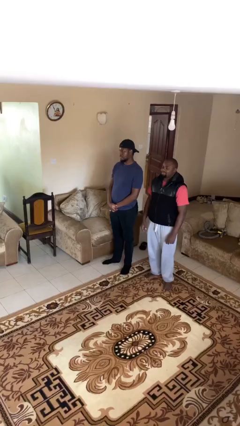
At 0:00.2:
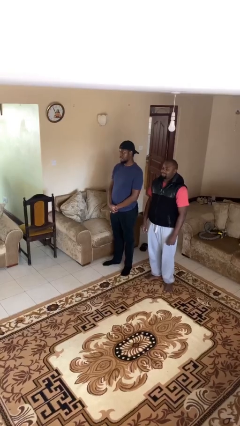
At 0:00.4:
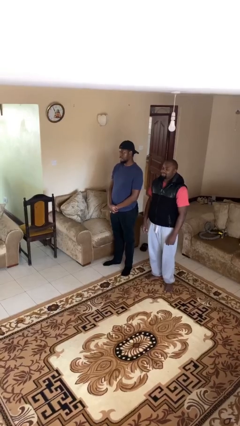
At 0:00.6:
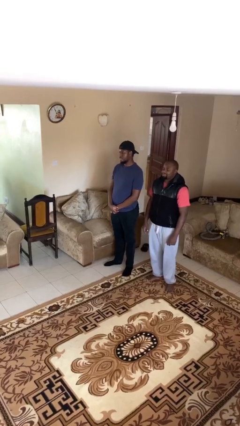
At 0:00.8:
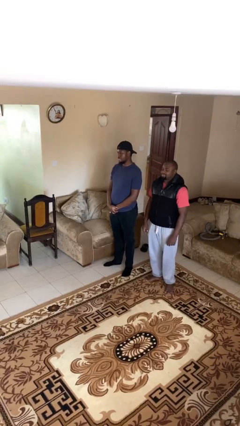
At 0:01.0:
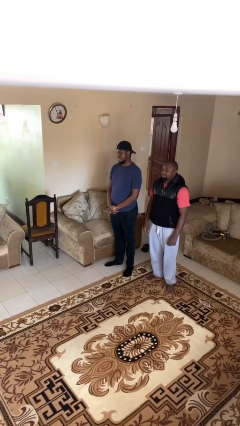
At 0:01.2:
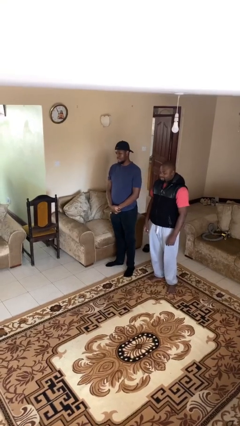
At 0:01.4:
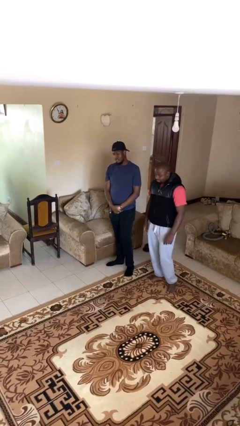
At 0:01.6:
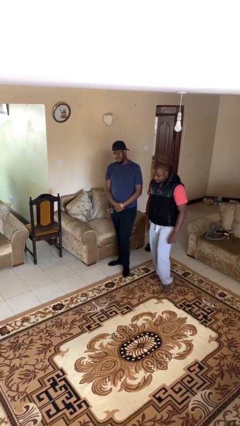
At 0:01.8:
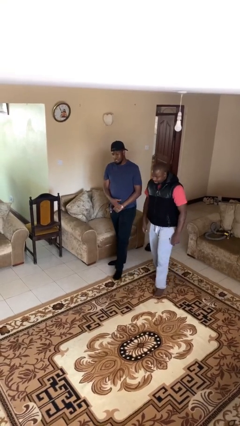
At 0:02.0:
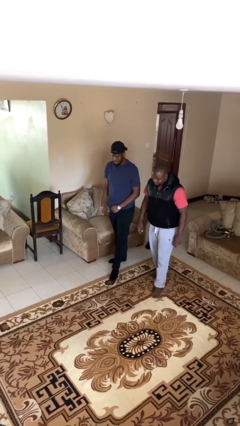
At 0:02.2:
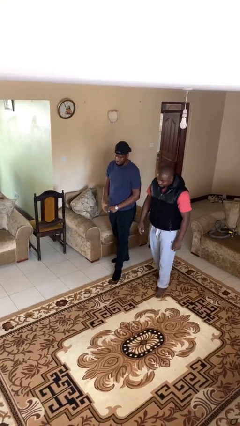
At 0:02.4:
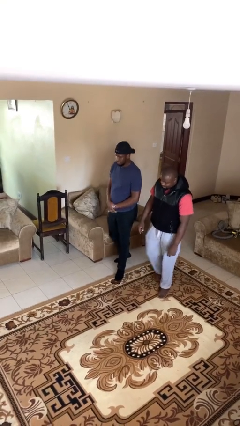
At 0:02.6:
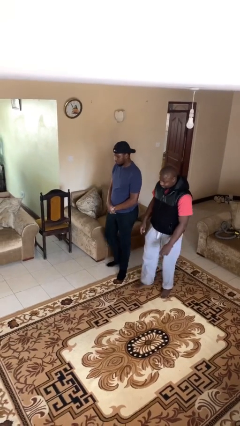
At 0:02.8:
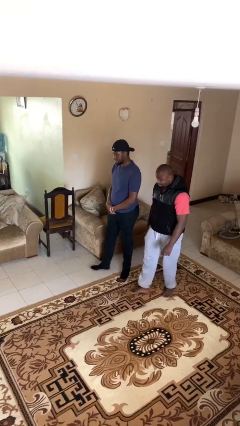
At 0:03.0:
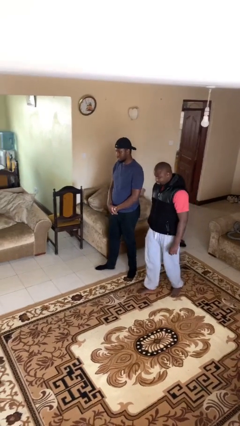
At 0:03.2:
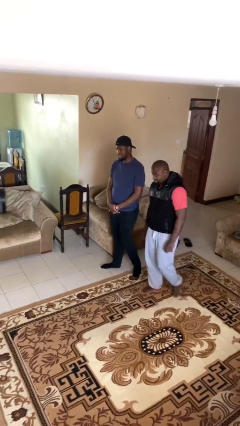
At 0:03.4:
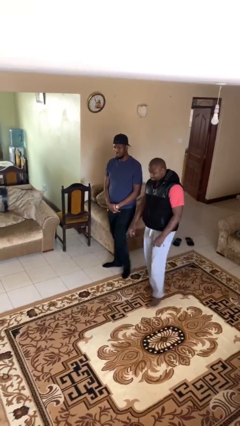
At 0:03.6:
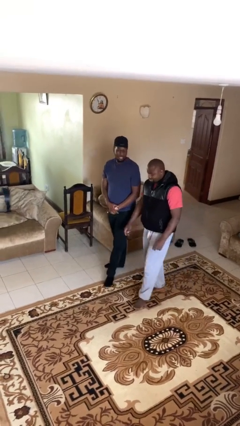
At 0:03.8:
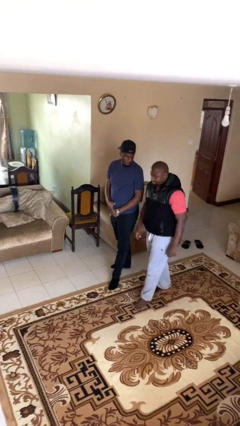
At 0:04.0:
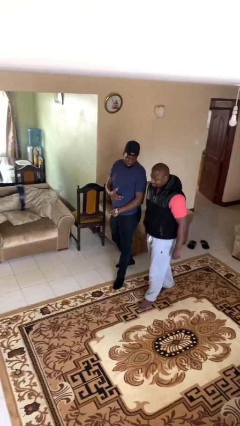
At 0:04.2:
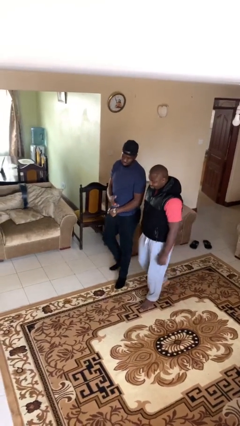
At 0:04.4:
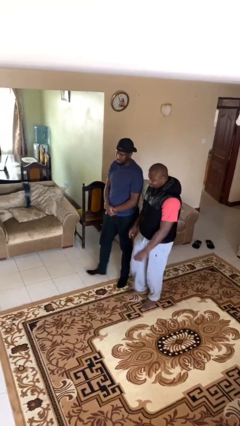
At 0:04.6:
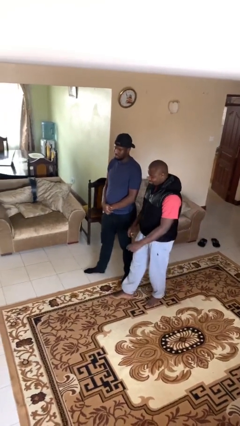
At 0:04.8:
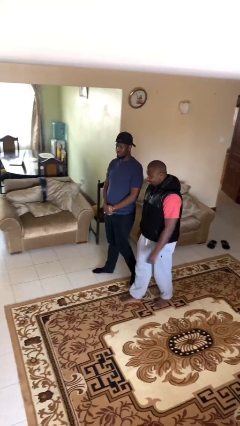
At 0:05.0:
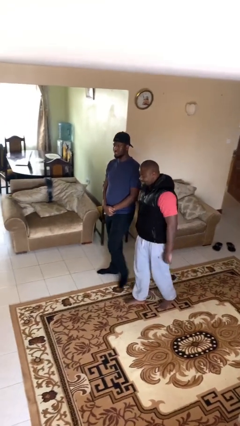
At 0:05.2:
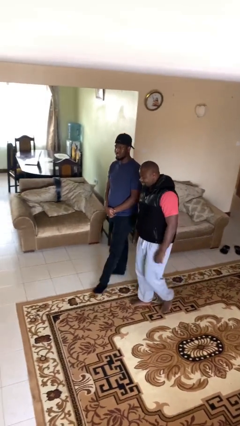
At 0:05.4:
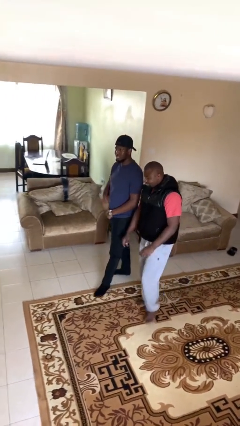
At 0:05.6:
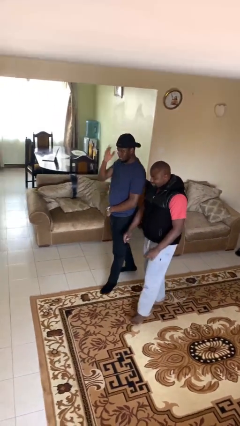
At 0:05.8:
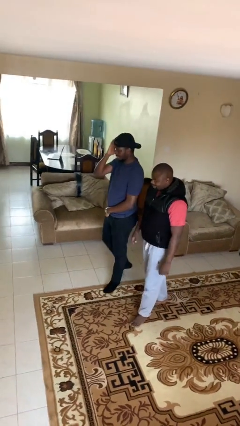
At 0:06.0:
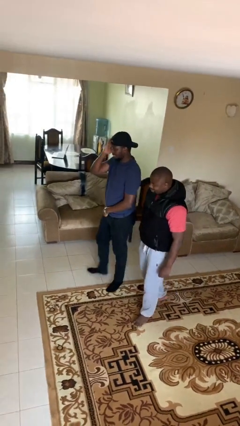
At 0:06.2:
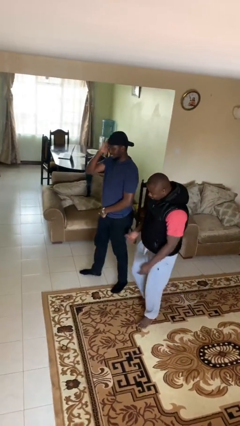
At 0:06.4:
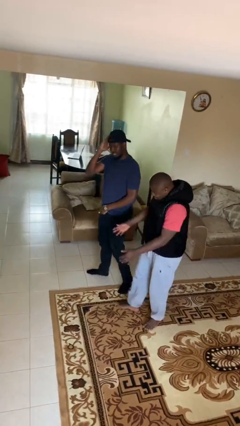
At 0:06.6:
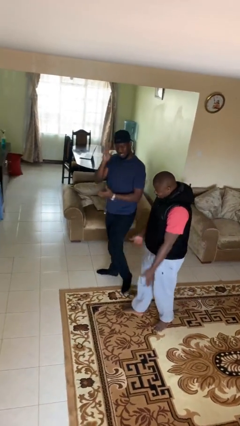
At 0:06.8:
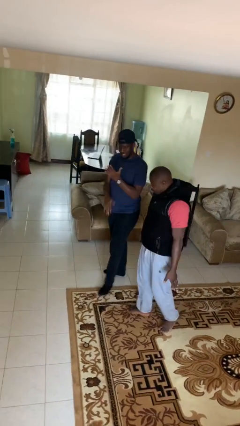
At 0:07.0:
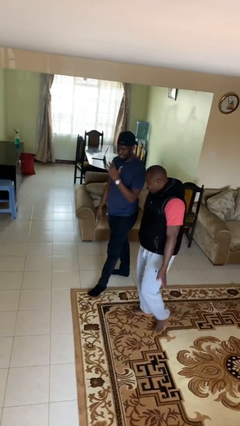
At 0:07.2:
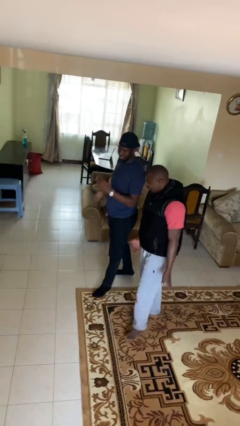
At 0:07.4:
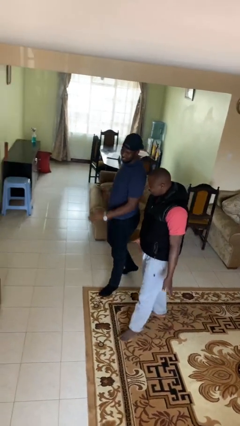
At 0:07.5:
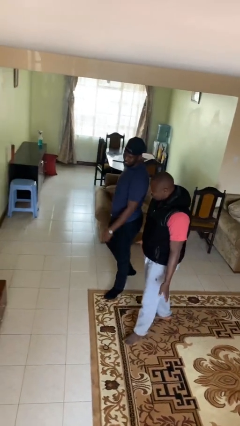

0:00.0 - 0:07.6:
person talks to person

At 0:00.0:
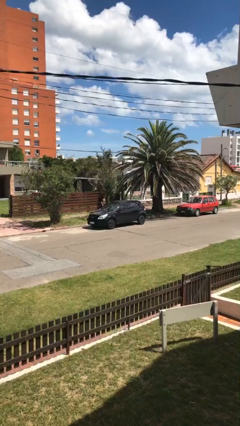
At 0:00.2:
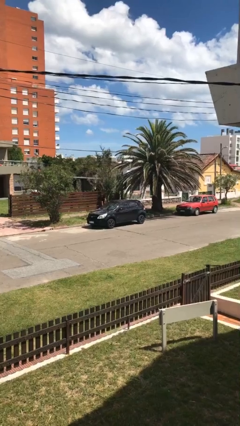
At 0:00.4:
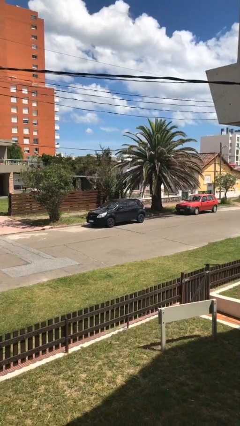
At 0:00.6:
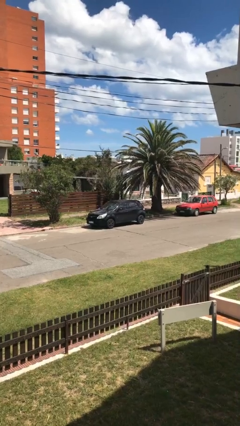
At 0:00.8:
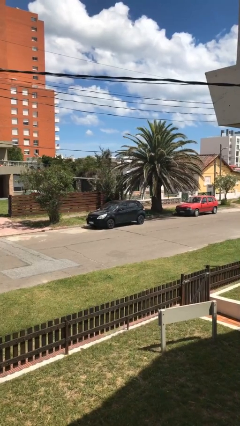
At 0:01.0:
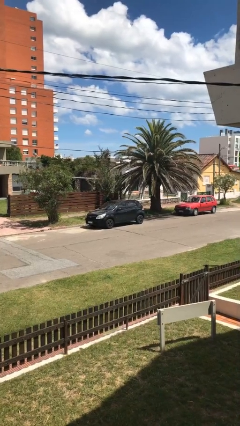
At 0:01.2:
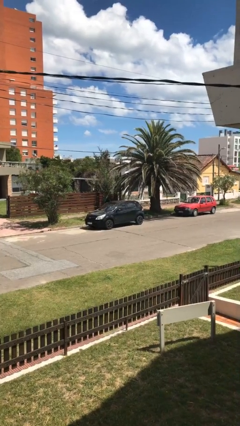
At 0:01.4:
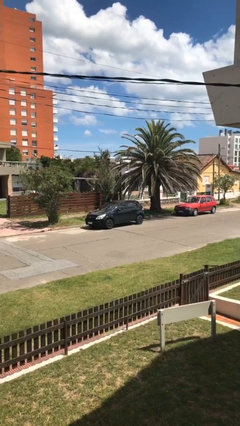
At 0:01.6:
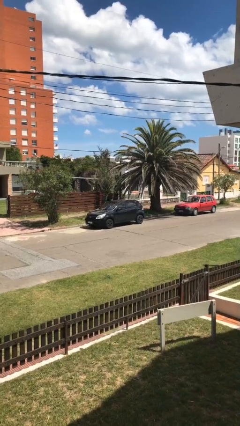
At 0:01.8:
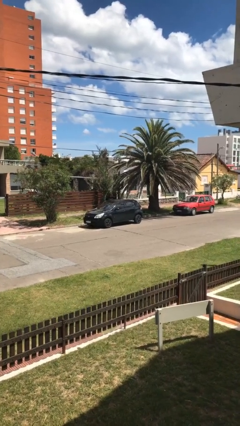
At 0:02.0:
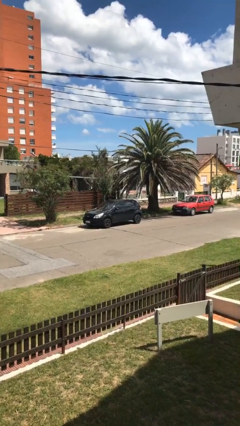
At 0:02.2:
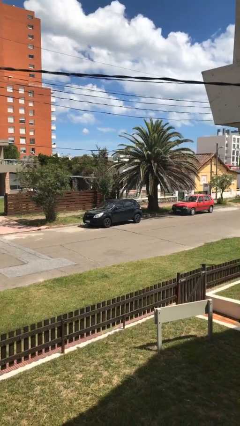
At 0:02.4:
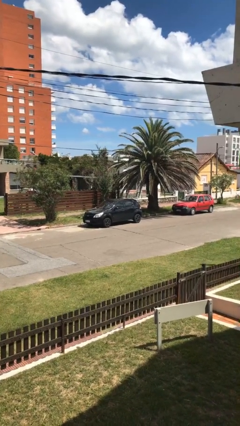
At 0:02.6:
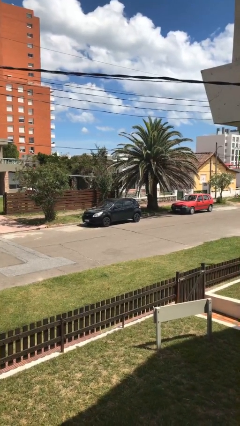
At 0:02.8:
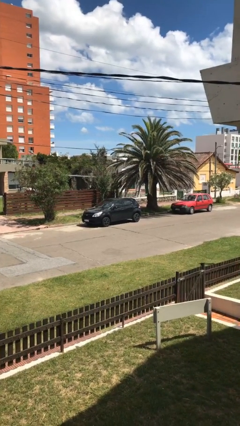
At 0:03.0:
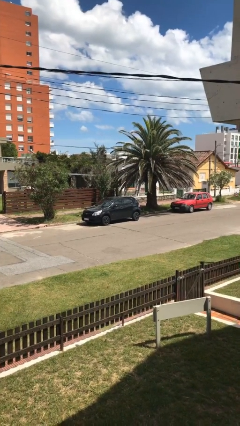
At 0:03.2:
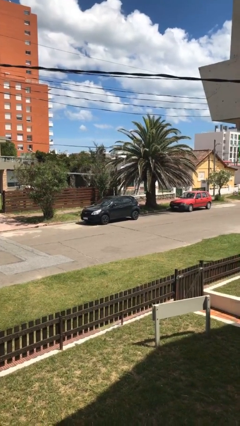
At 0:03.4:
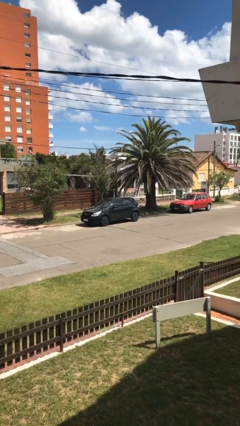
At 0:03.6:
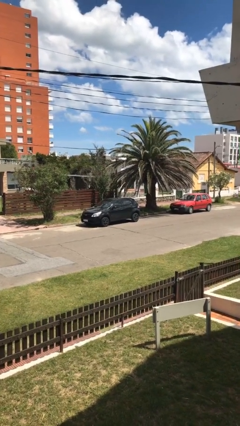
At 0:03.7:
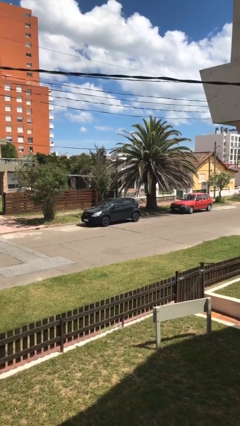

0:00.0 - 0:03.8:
car picks up person

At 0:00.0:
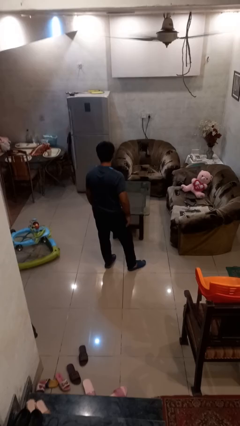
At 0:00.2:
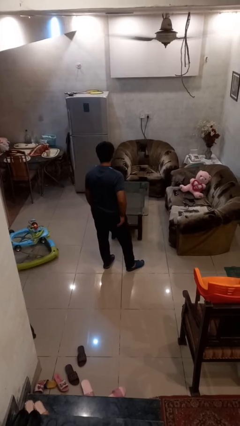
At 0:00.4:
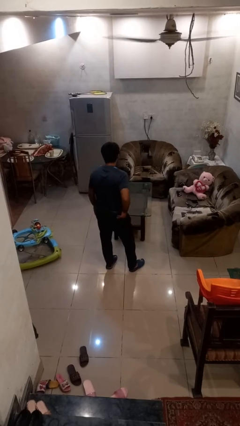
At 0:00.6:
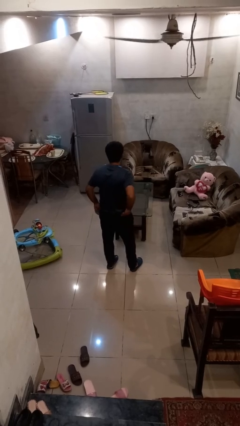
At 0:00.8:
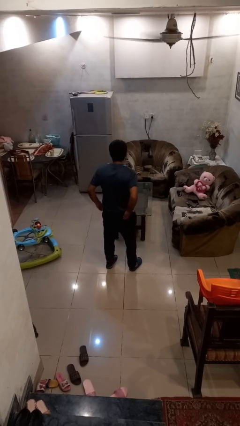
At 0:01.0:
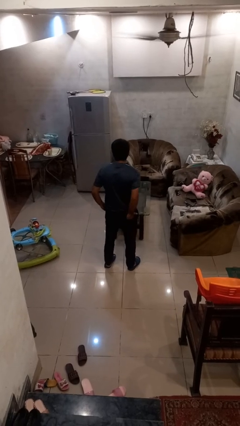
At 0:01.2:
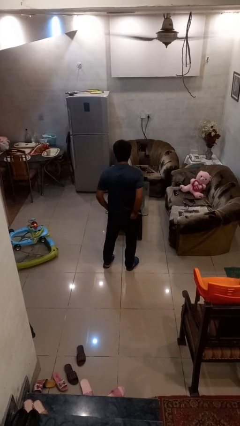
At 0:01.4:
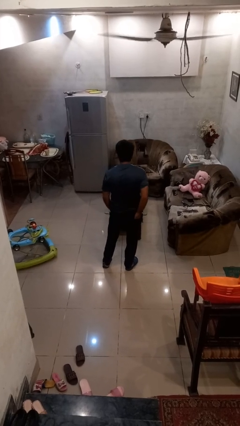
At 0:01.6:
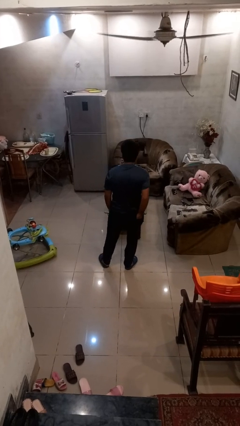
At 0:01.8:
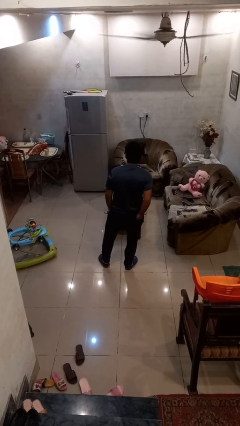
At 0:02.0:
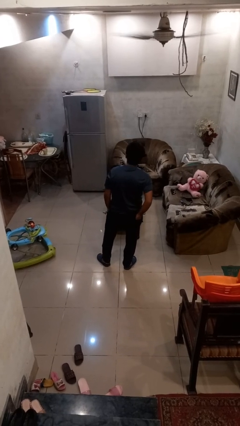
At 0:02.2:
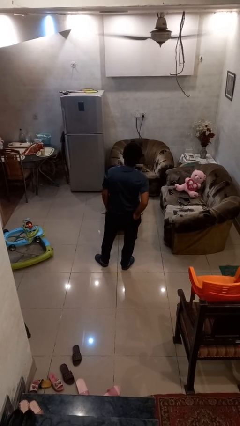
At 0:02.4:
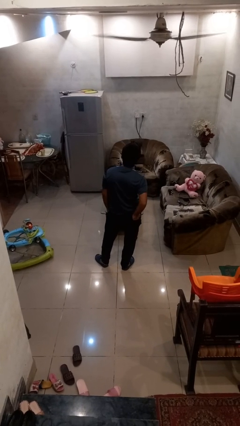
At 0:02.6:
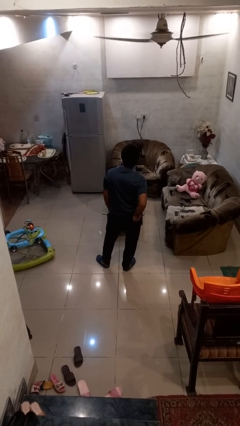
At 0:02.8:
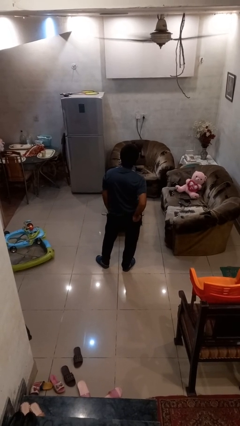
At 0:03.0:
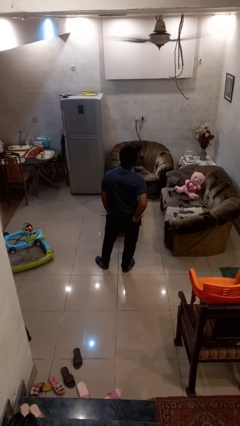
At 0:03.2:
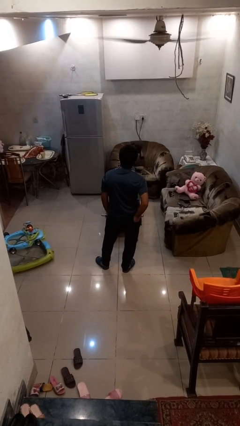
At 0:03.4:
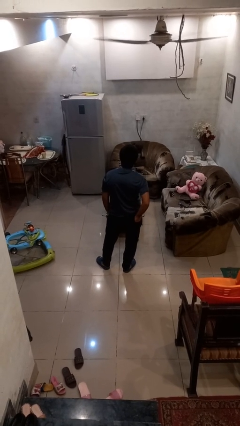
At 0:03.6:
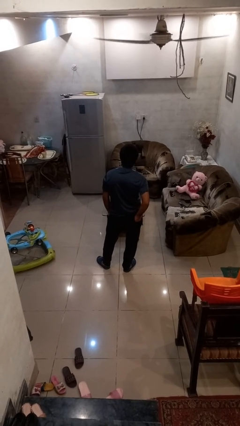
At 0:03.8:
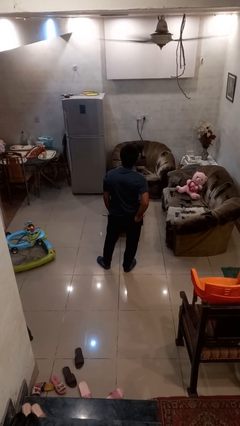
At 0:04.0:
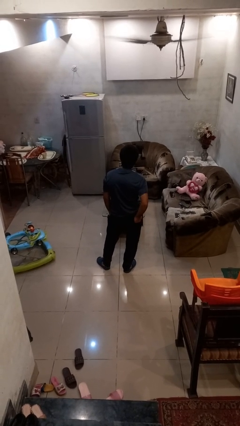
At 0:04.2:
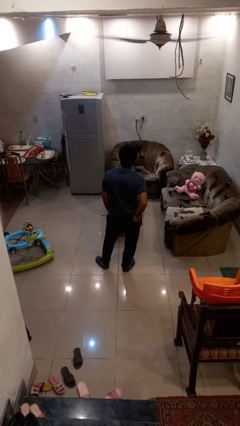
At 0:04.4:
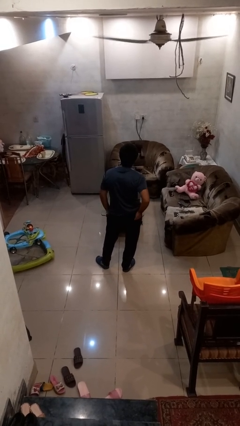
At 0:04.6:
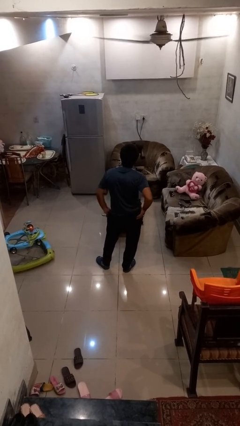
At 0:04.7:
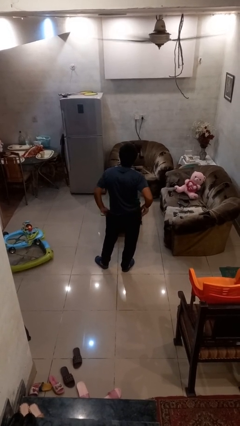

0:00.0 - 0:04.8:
person puts hands in back pockets

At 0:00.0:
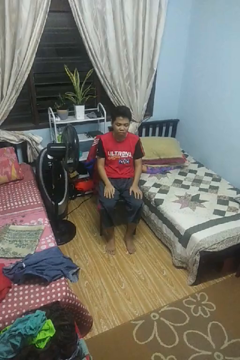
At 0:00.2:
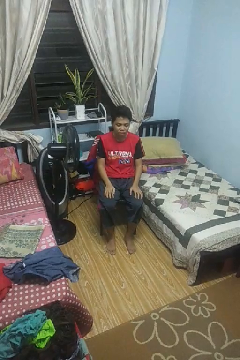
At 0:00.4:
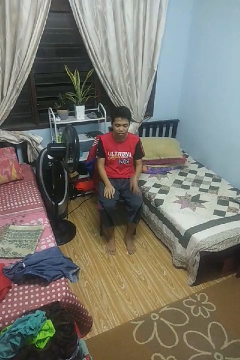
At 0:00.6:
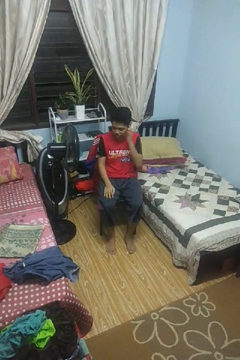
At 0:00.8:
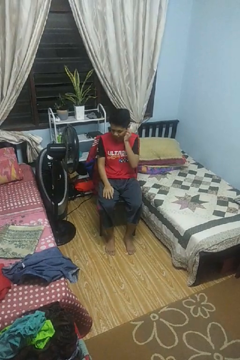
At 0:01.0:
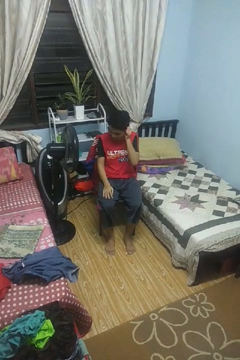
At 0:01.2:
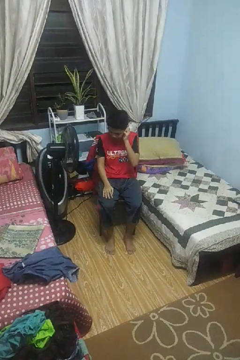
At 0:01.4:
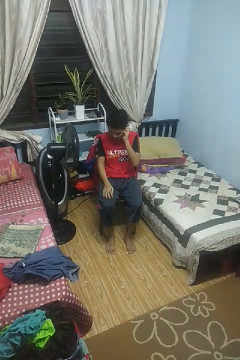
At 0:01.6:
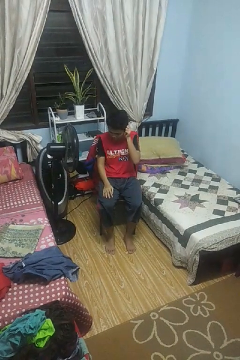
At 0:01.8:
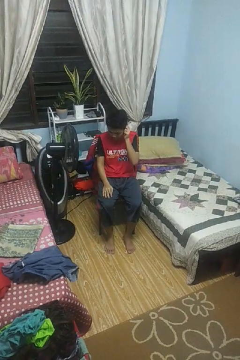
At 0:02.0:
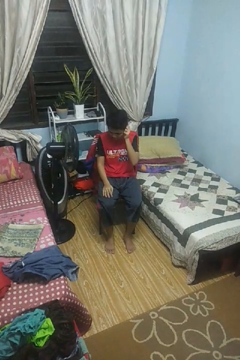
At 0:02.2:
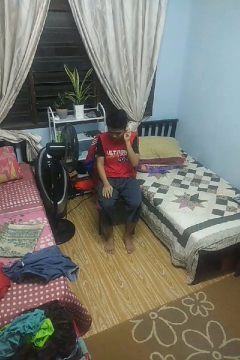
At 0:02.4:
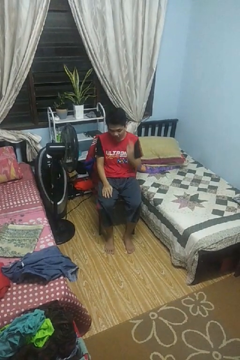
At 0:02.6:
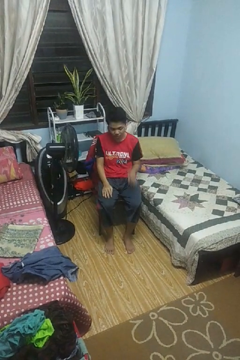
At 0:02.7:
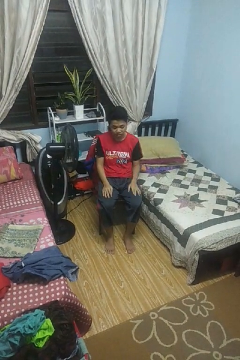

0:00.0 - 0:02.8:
person touches earlobe
